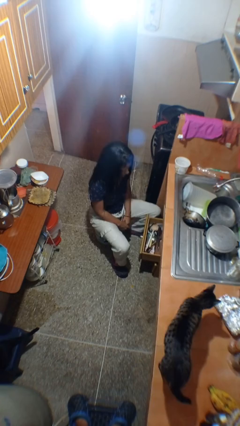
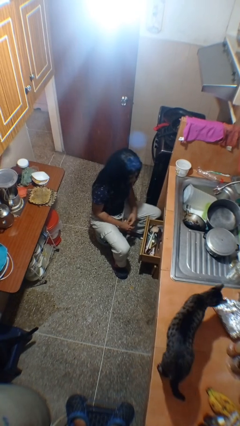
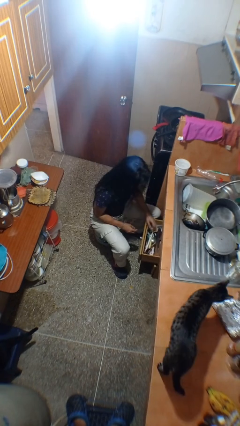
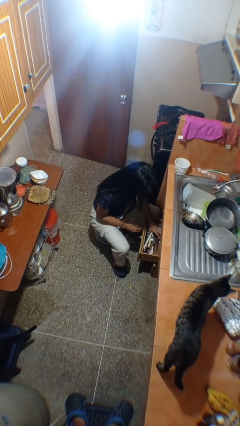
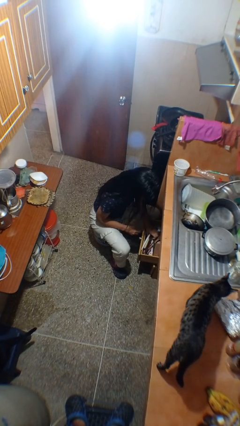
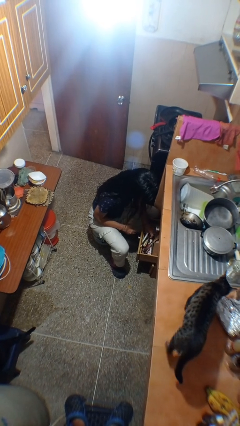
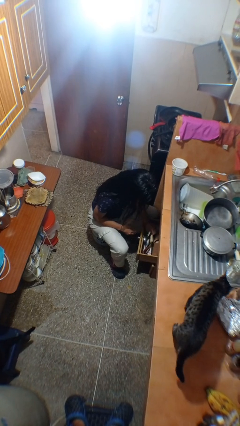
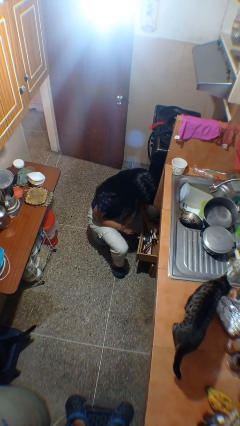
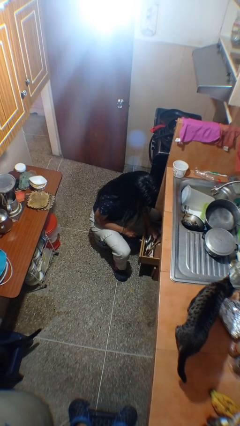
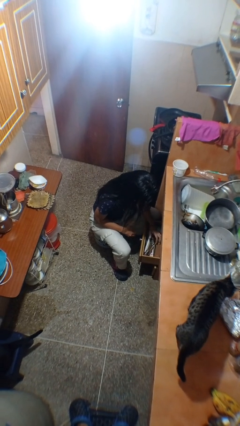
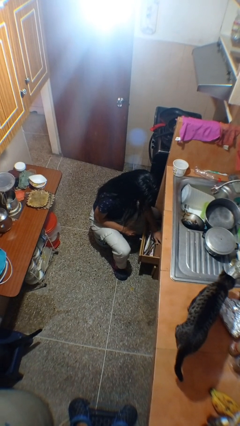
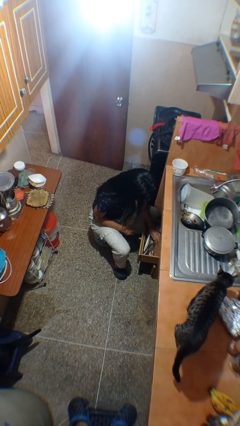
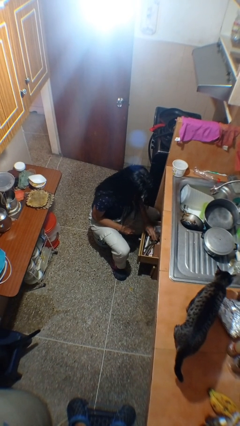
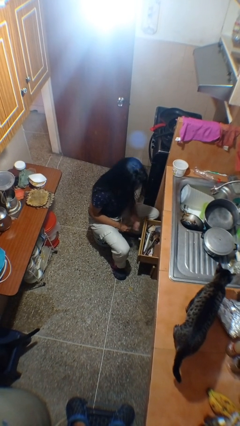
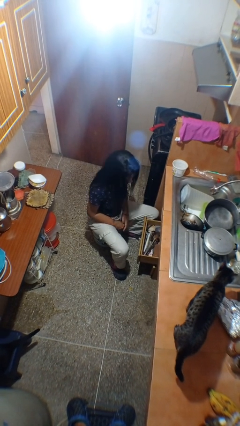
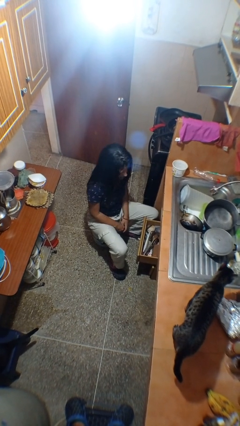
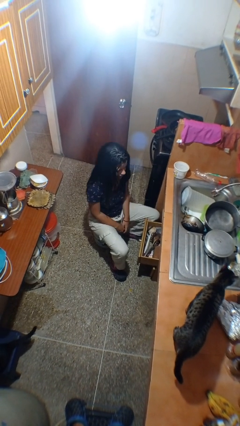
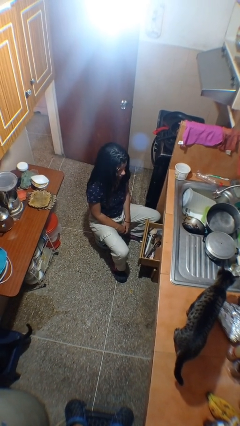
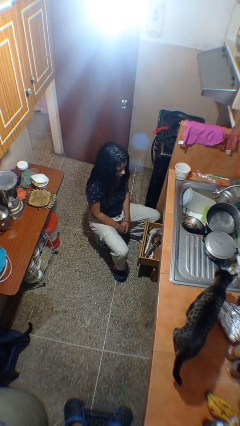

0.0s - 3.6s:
person searches in kitchen drawer

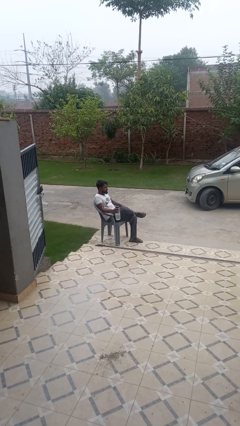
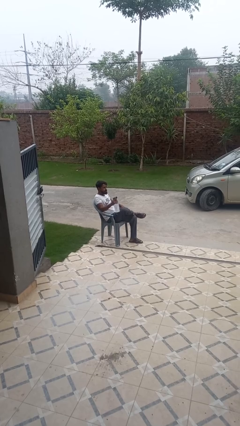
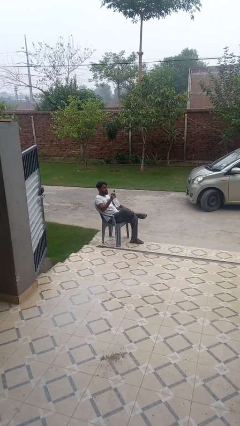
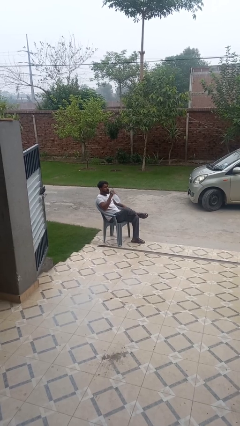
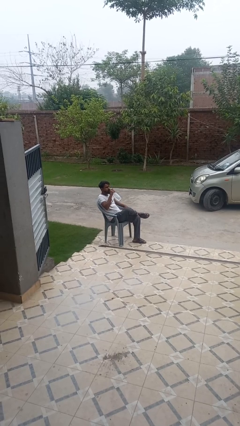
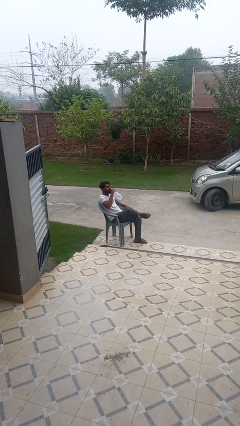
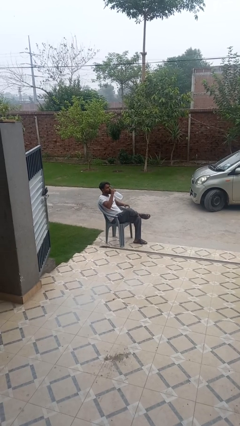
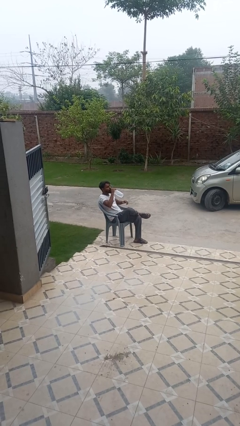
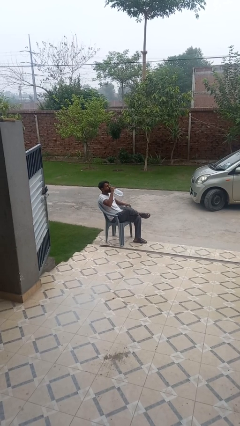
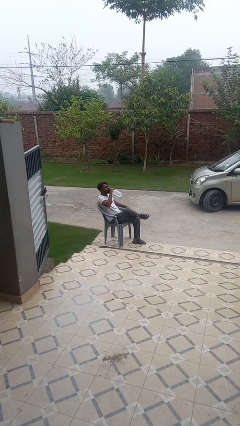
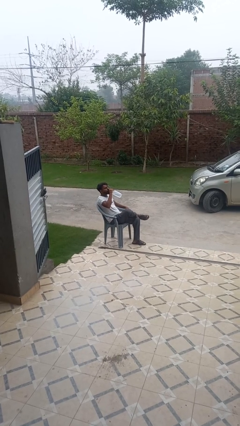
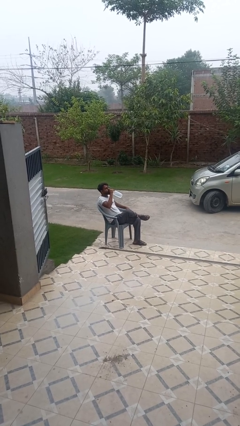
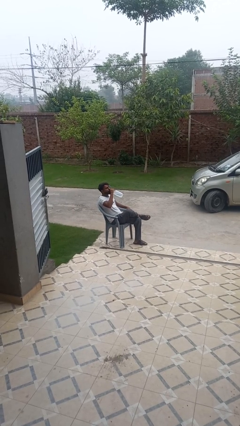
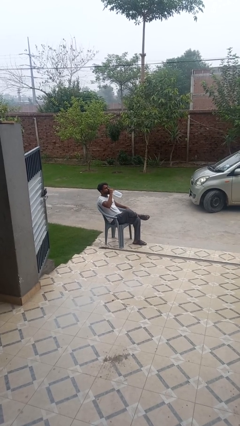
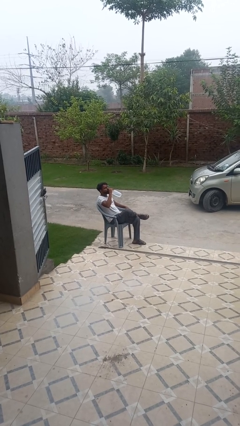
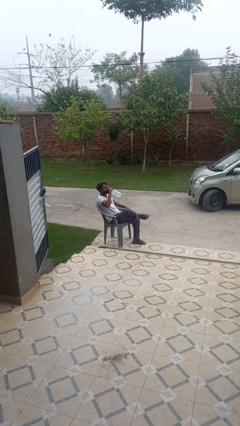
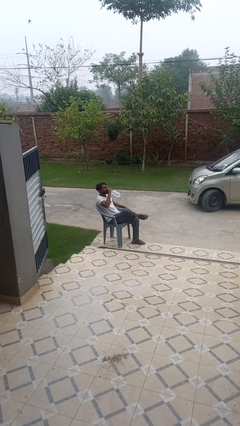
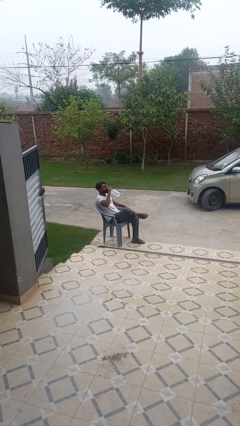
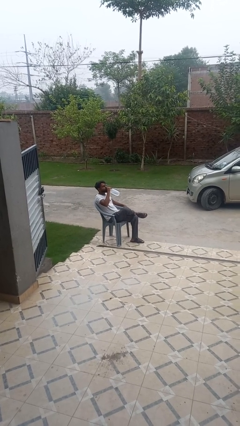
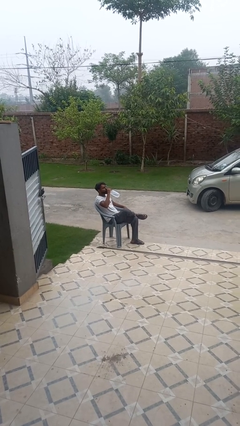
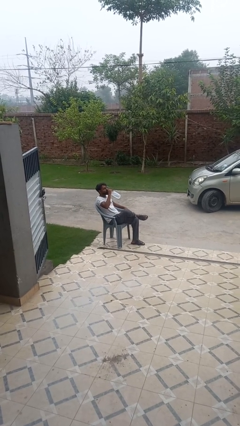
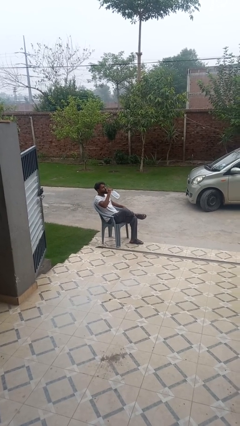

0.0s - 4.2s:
person drinks from bottle

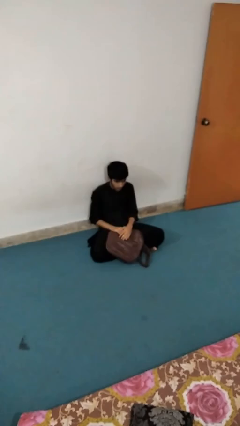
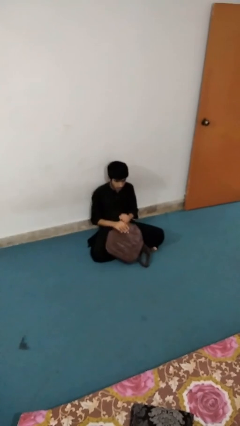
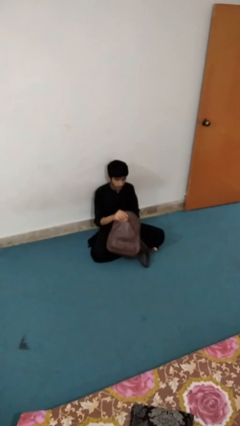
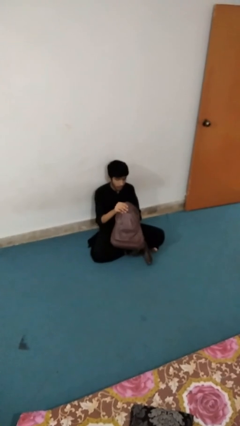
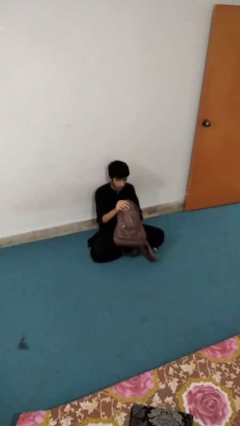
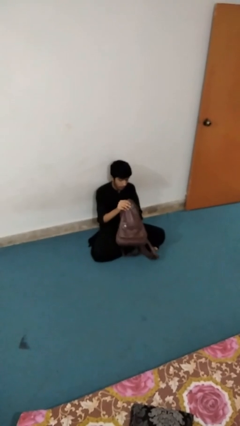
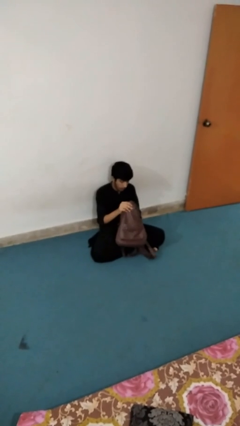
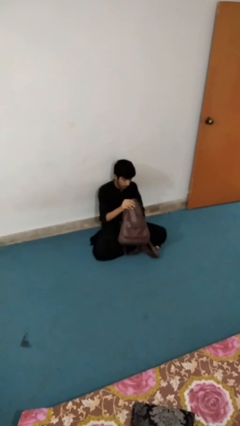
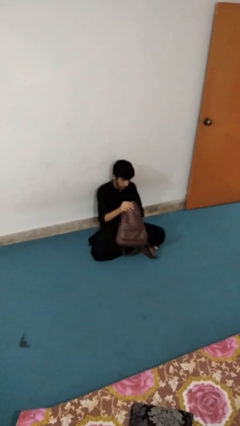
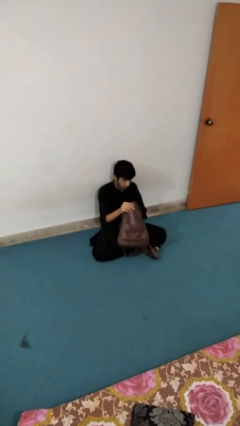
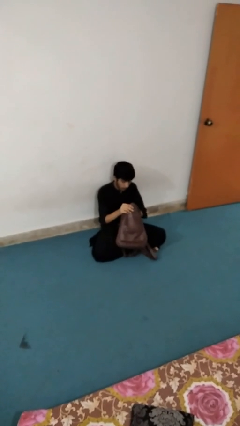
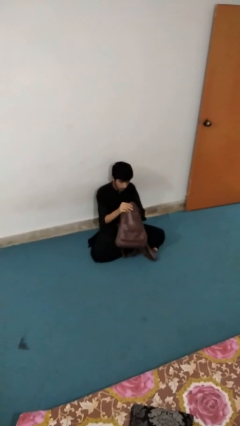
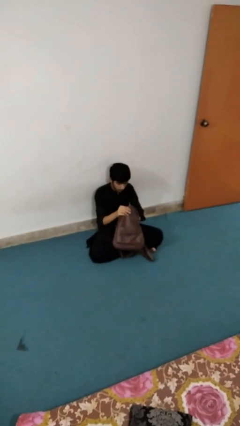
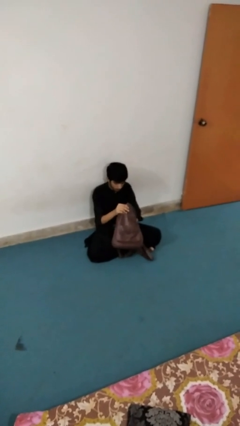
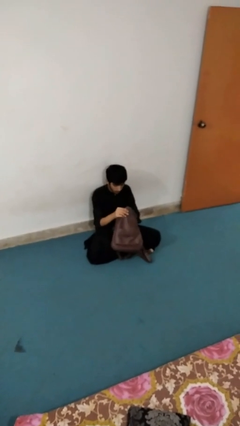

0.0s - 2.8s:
person searches in bag

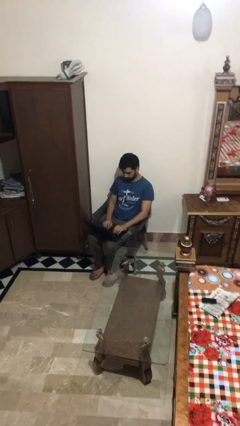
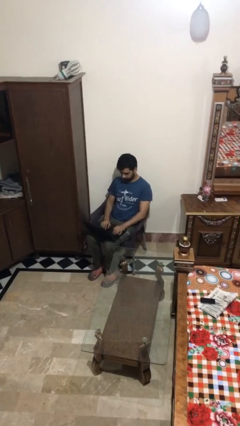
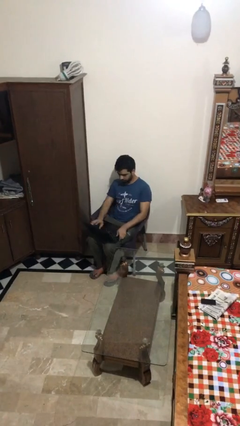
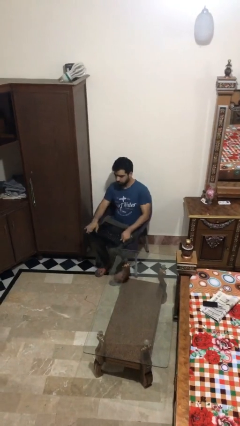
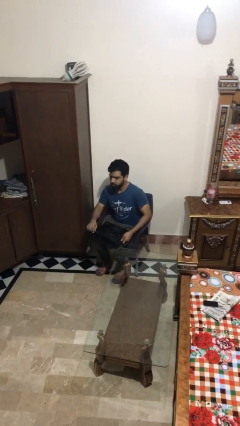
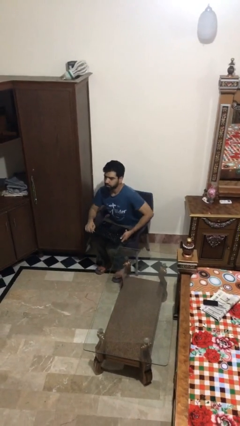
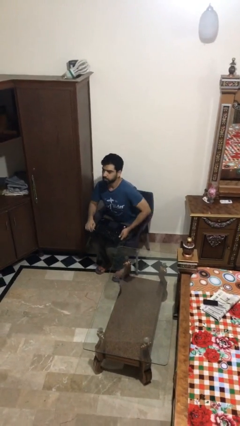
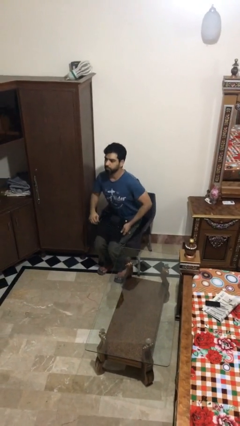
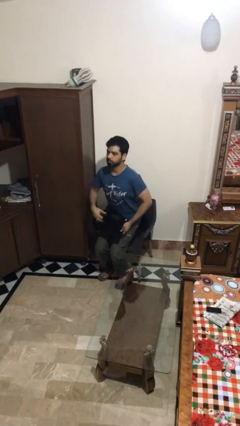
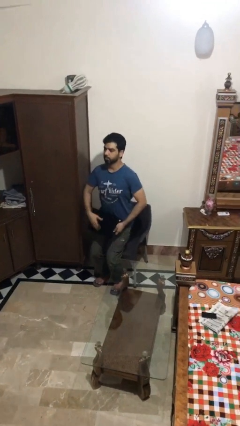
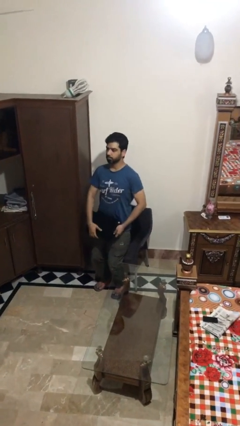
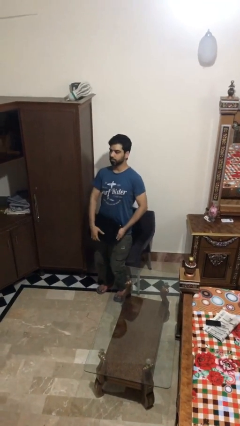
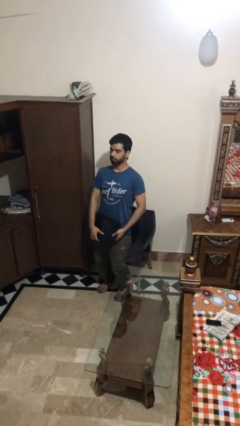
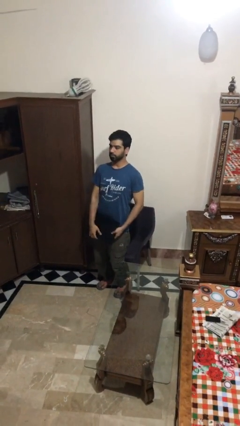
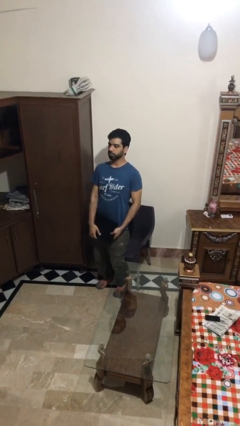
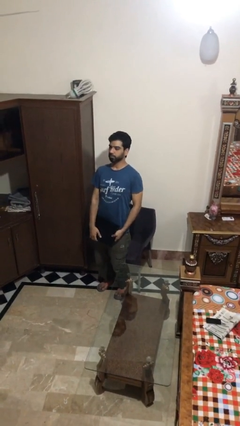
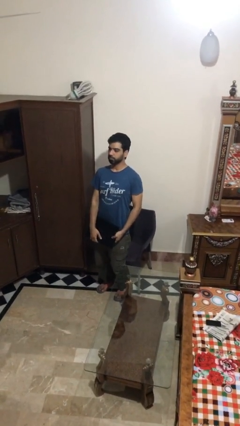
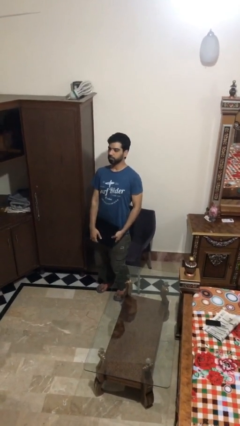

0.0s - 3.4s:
person stands up

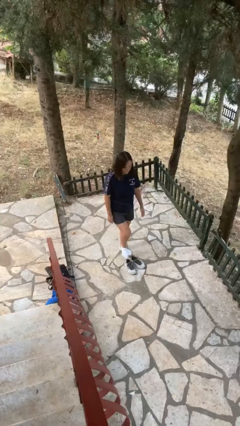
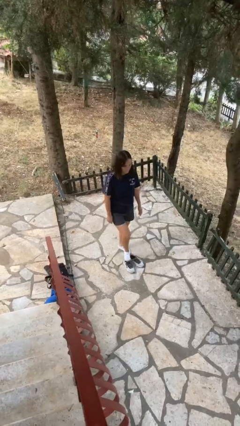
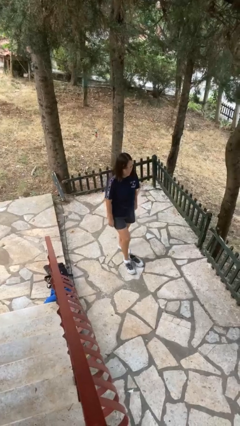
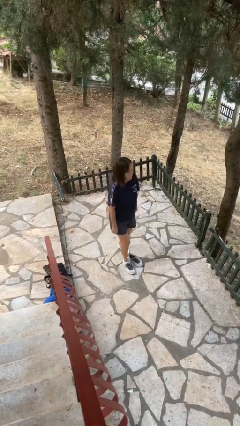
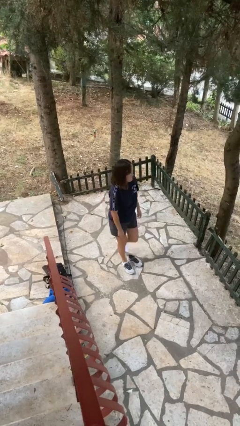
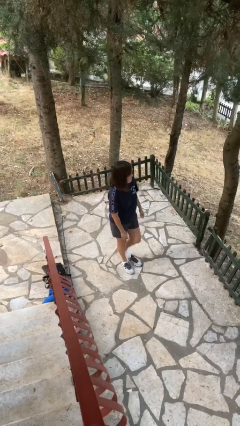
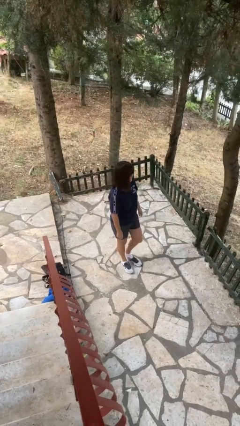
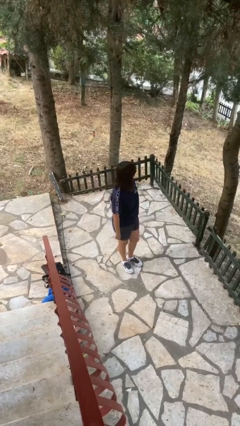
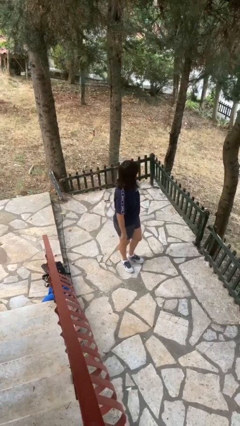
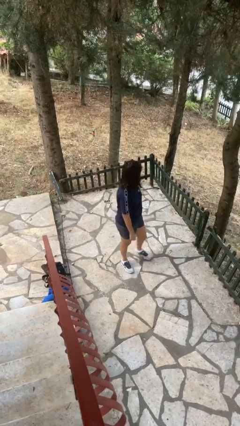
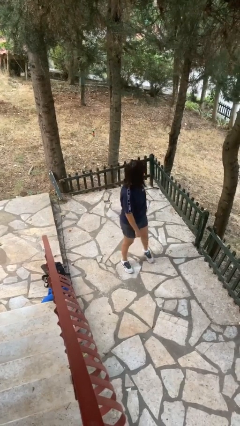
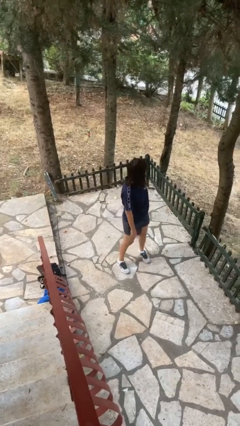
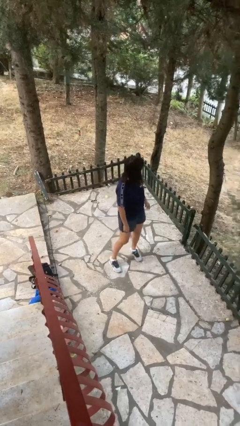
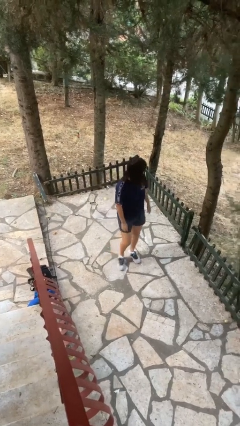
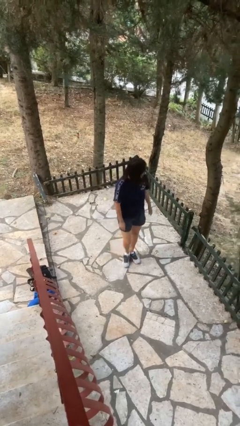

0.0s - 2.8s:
person puts on shoes

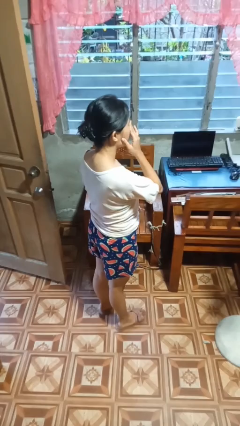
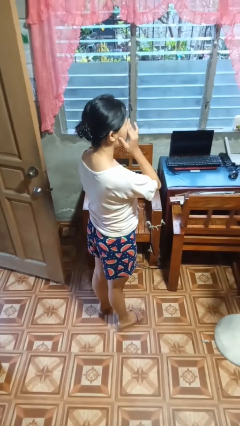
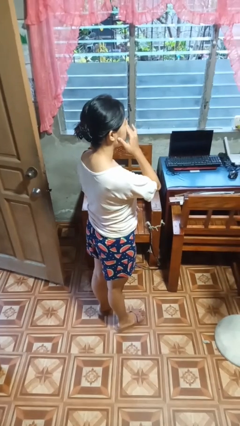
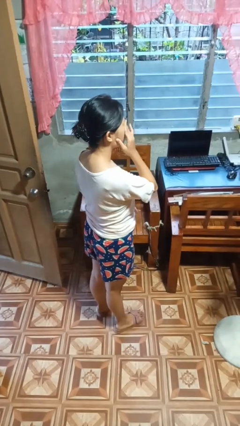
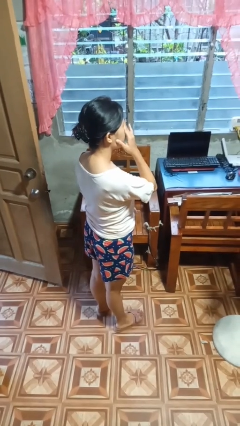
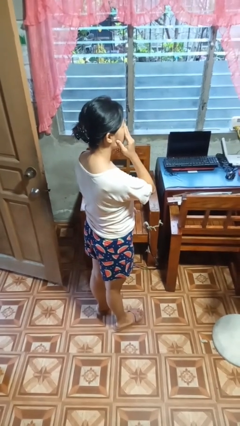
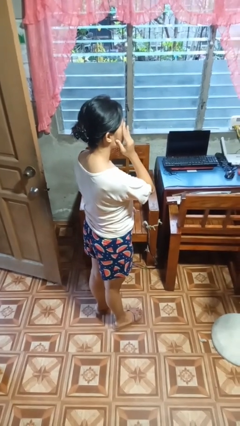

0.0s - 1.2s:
person rubs eyes
